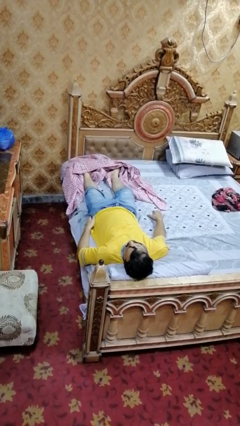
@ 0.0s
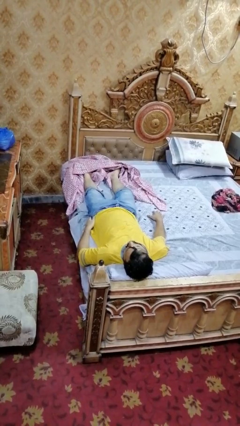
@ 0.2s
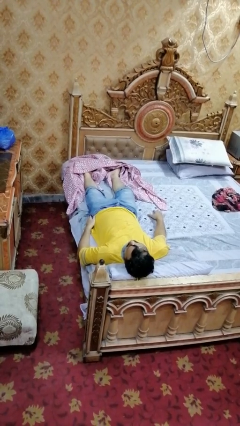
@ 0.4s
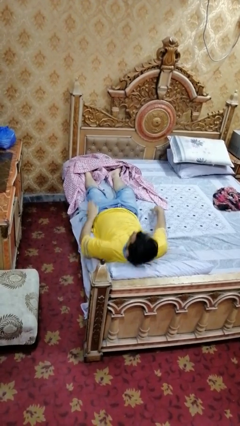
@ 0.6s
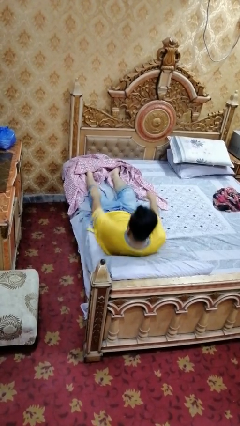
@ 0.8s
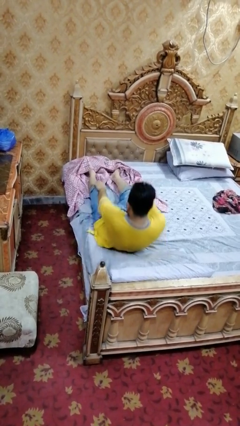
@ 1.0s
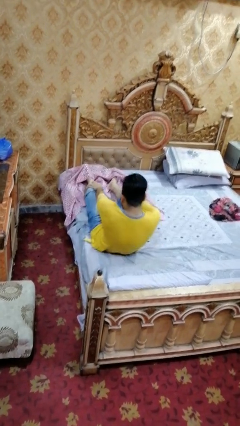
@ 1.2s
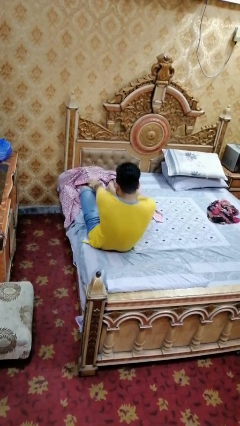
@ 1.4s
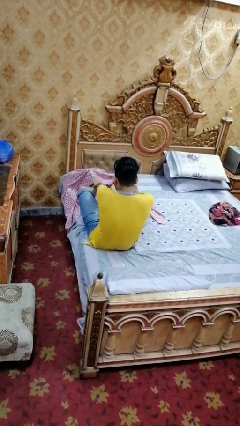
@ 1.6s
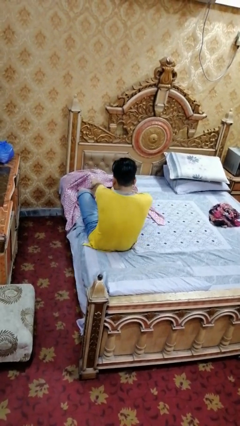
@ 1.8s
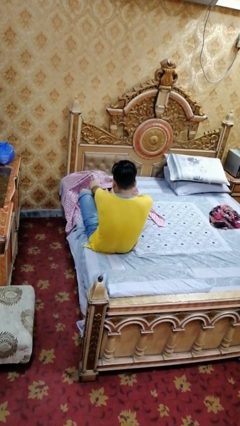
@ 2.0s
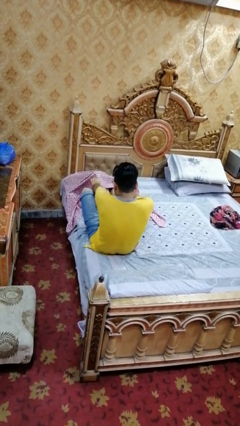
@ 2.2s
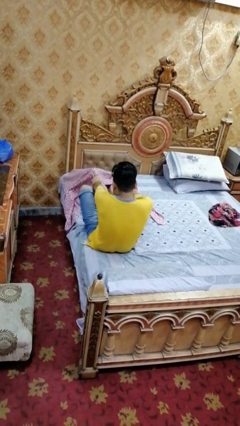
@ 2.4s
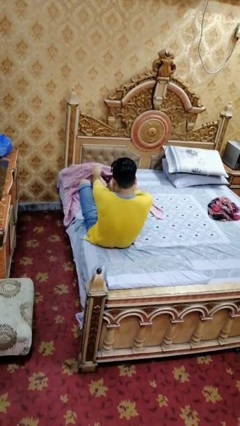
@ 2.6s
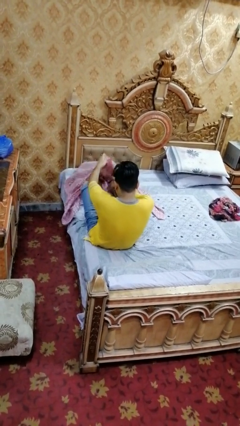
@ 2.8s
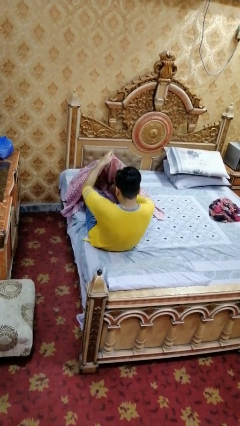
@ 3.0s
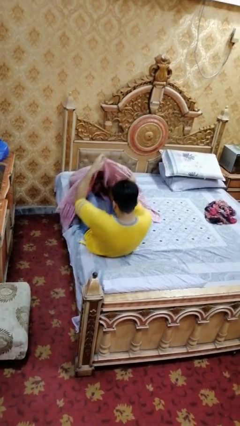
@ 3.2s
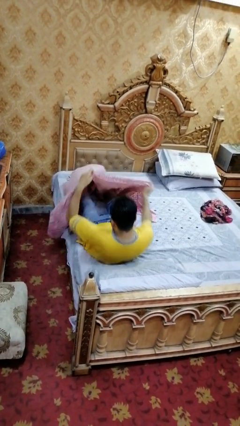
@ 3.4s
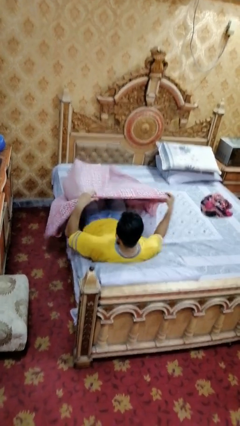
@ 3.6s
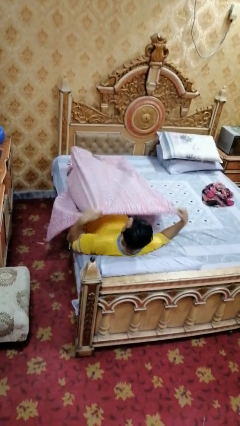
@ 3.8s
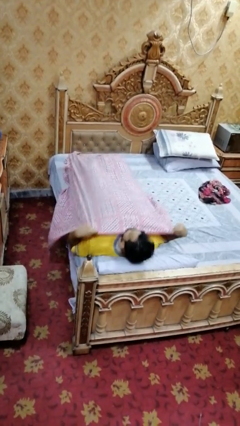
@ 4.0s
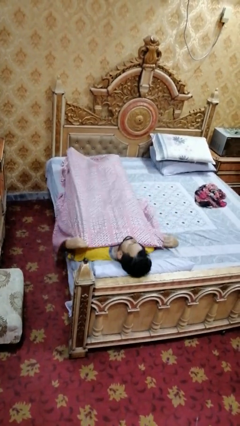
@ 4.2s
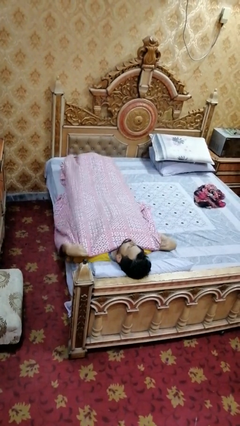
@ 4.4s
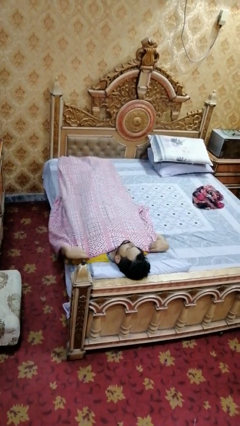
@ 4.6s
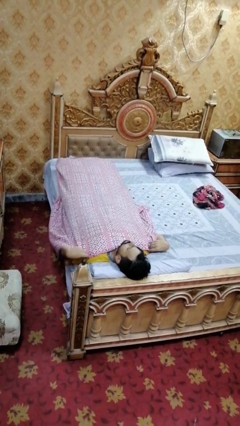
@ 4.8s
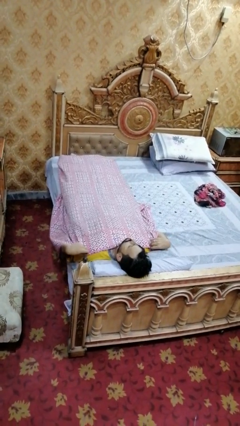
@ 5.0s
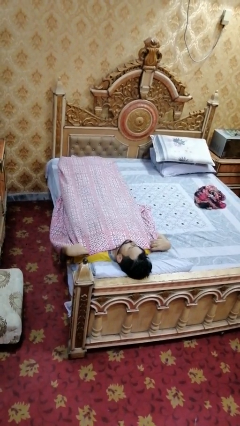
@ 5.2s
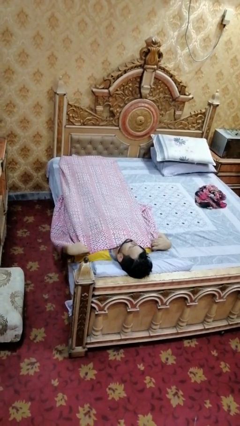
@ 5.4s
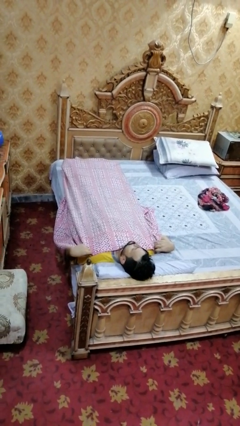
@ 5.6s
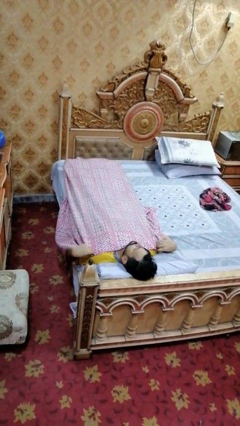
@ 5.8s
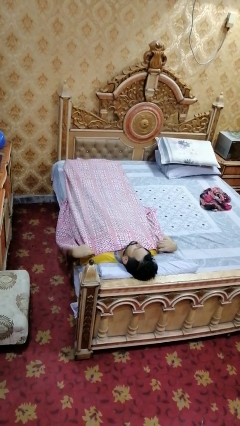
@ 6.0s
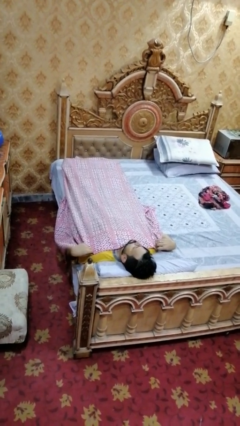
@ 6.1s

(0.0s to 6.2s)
person covers with bedsheets

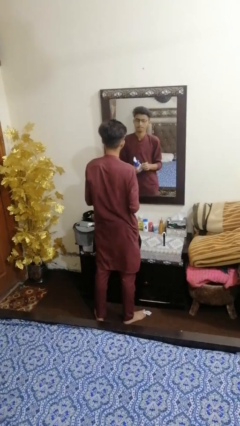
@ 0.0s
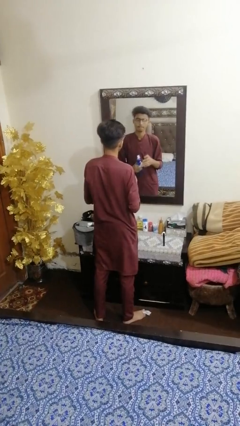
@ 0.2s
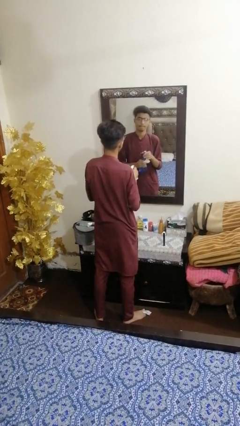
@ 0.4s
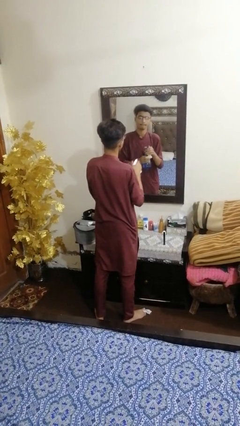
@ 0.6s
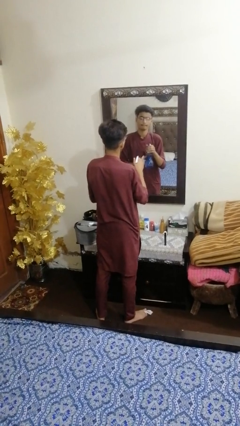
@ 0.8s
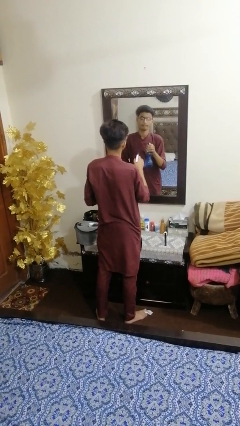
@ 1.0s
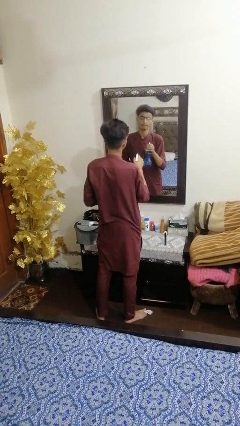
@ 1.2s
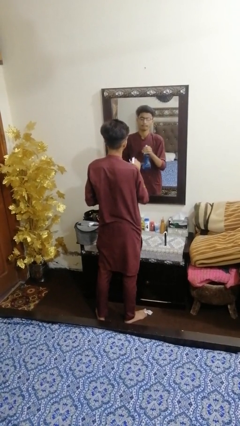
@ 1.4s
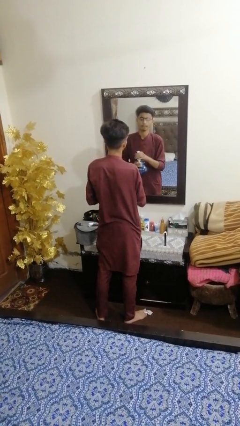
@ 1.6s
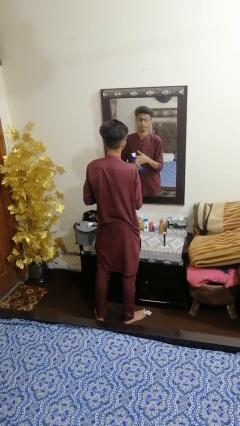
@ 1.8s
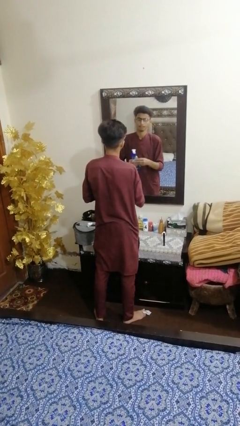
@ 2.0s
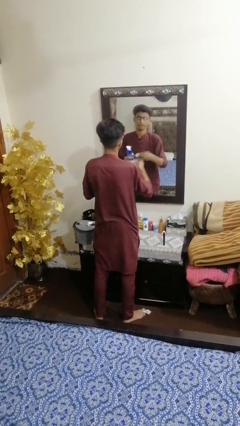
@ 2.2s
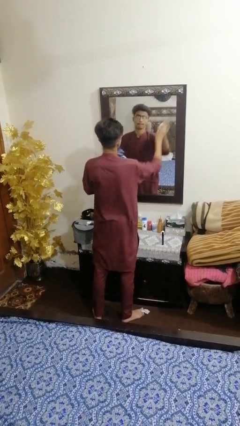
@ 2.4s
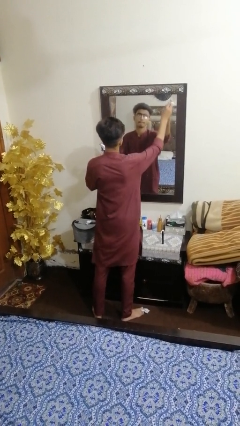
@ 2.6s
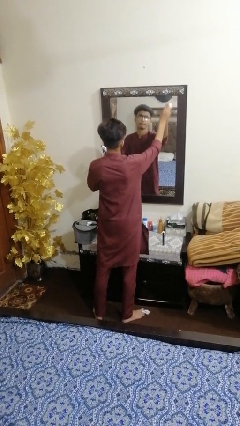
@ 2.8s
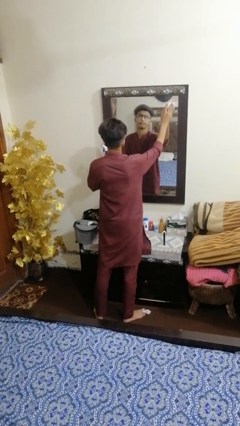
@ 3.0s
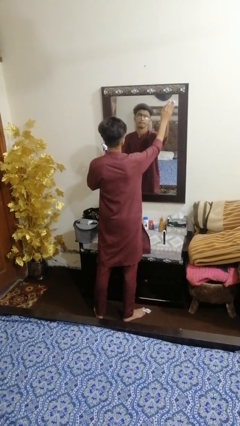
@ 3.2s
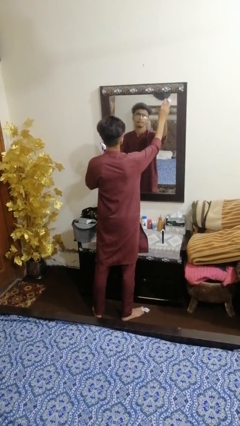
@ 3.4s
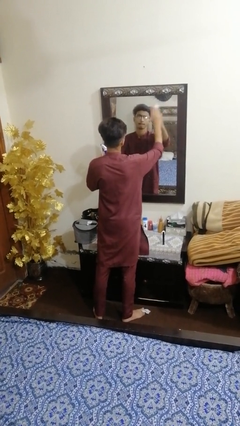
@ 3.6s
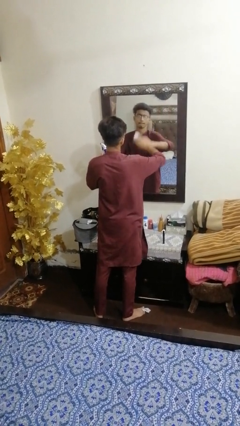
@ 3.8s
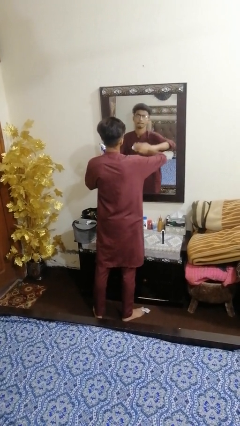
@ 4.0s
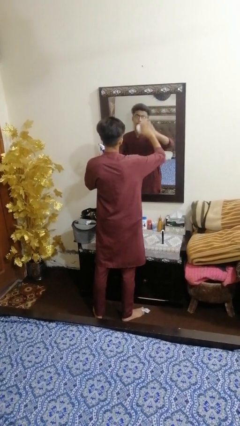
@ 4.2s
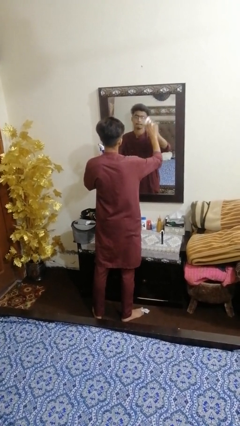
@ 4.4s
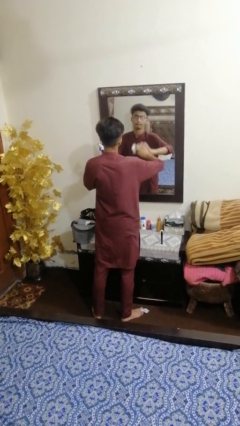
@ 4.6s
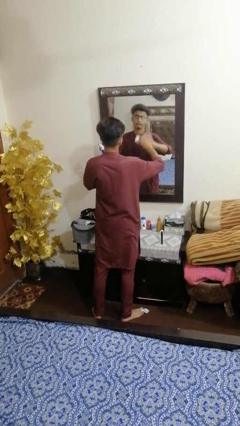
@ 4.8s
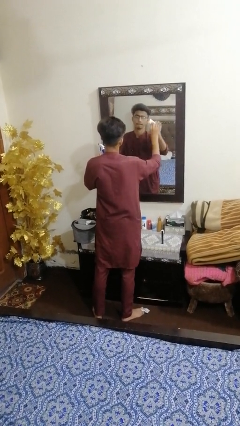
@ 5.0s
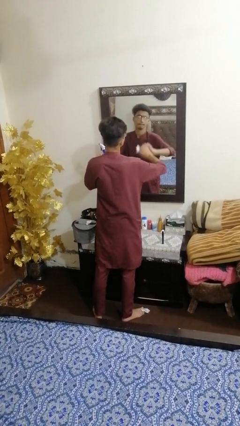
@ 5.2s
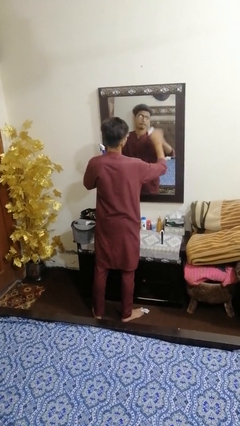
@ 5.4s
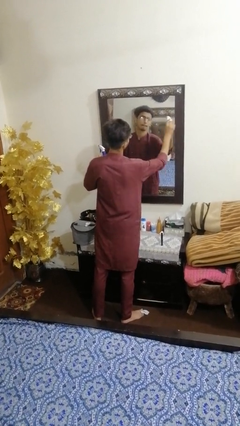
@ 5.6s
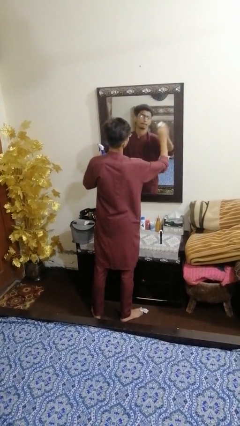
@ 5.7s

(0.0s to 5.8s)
person sprays from bottle

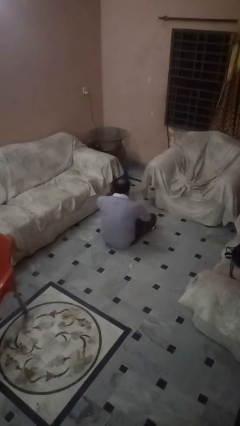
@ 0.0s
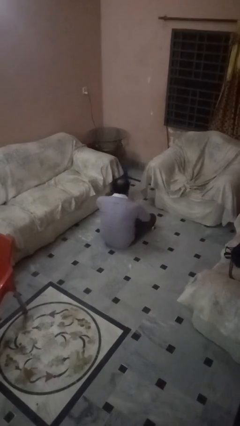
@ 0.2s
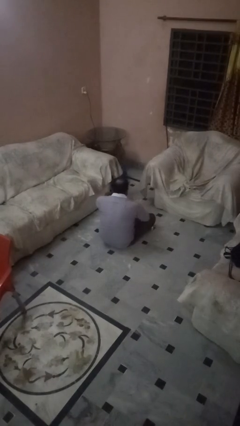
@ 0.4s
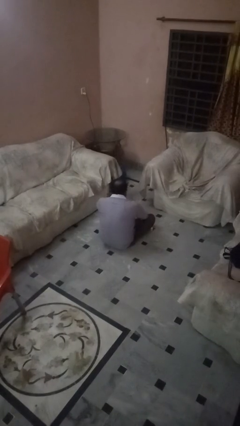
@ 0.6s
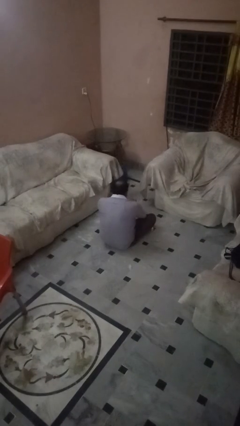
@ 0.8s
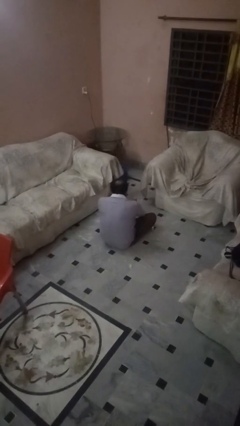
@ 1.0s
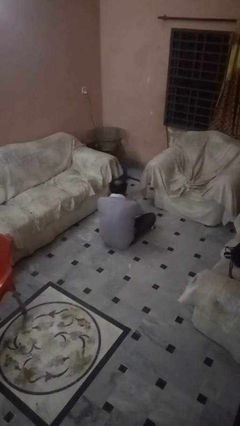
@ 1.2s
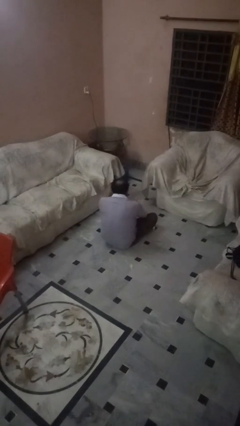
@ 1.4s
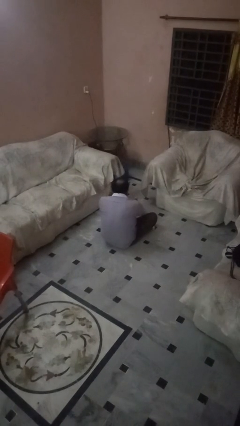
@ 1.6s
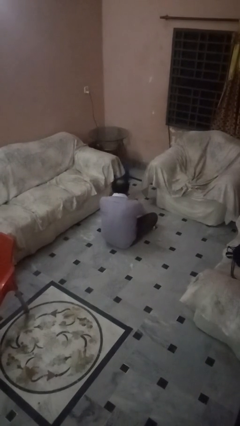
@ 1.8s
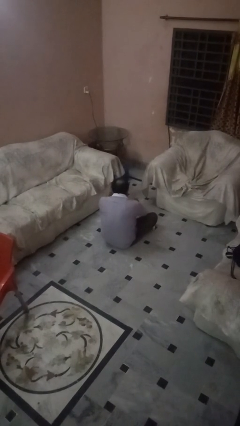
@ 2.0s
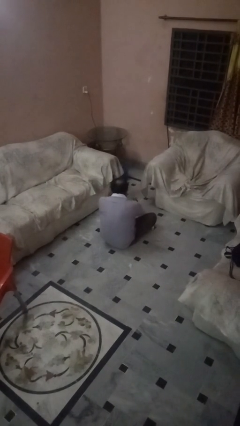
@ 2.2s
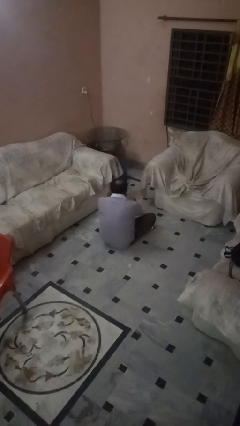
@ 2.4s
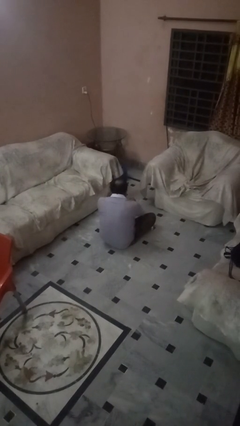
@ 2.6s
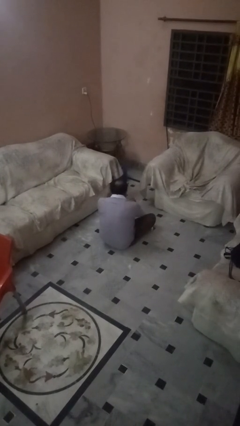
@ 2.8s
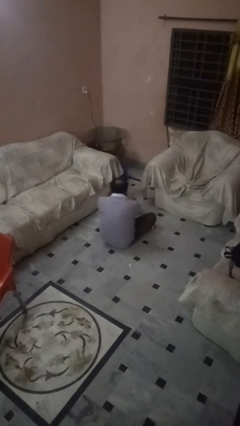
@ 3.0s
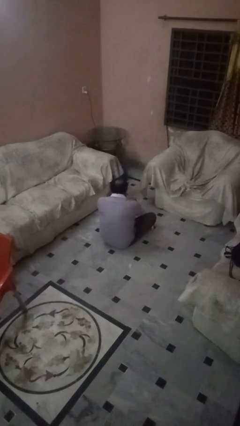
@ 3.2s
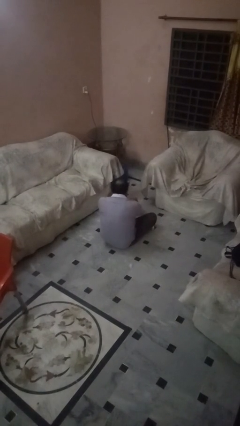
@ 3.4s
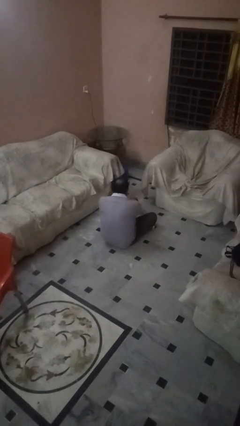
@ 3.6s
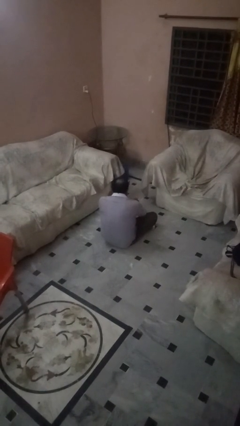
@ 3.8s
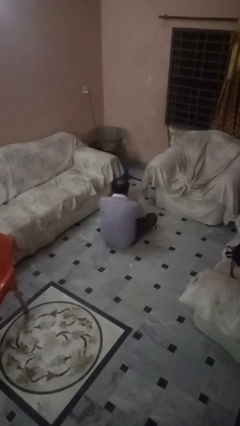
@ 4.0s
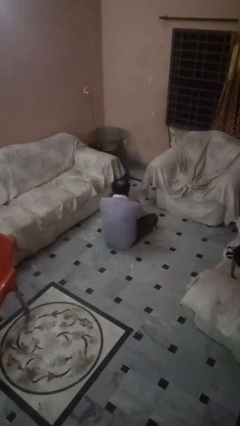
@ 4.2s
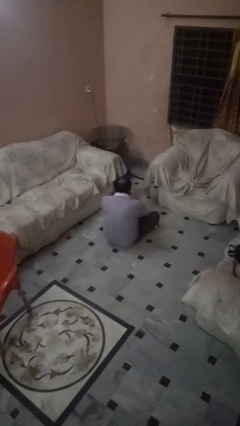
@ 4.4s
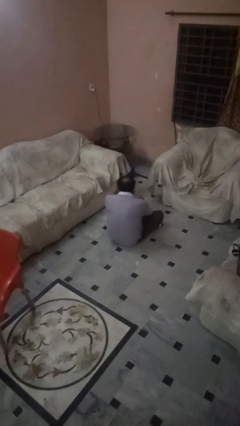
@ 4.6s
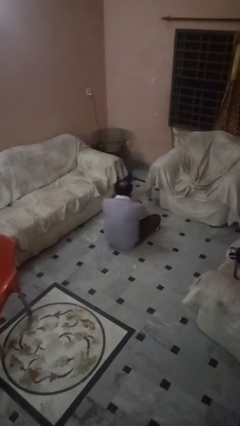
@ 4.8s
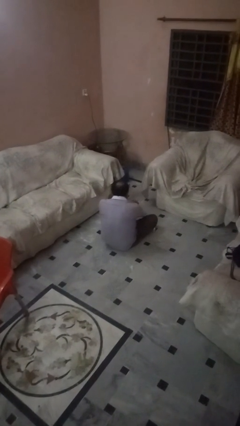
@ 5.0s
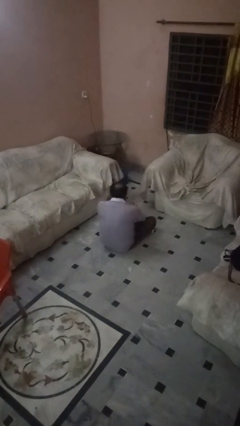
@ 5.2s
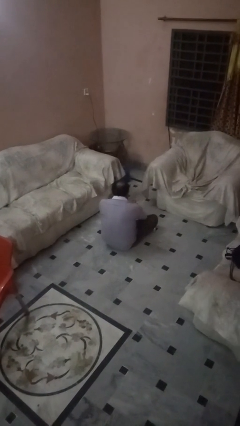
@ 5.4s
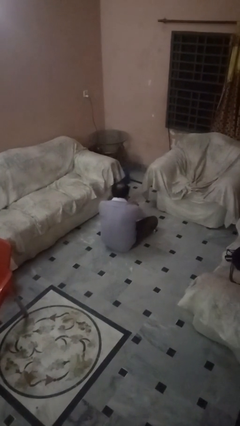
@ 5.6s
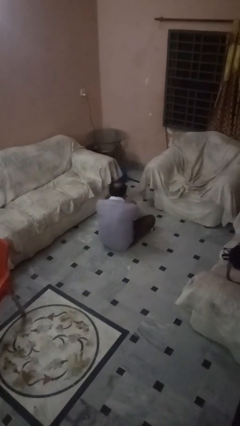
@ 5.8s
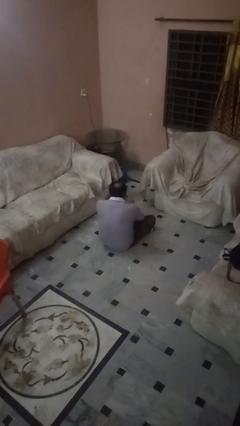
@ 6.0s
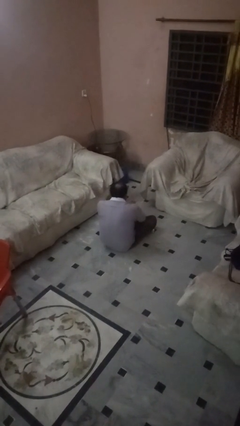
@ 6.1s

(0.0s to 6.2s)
person rubs foot

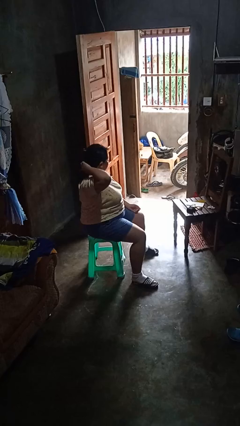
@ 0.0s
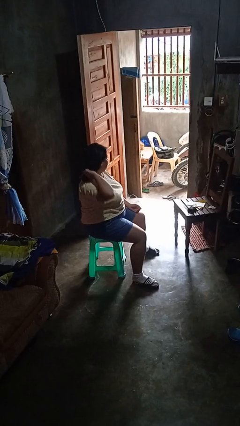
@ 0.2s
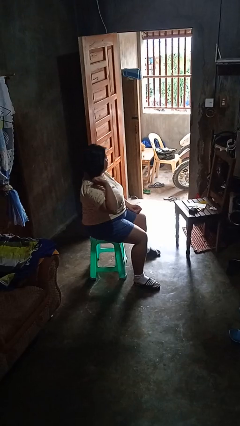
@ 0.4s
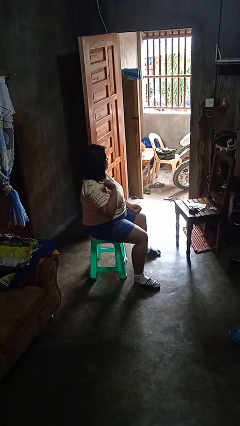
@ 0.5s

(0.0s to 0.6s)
person takes off hairtie
